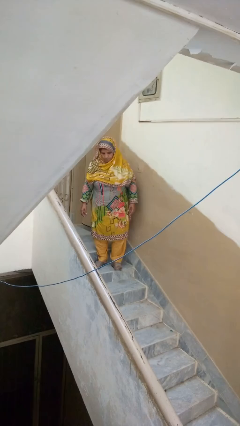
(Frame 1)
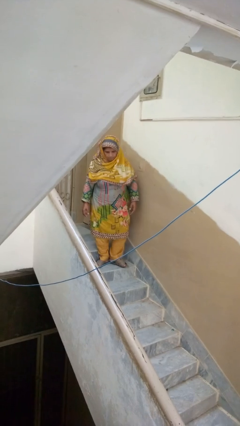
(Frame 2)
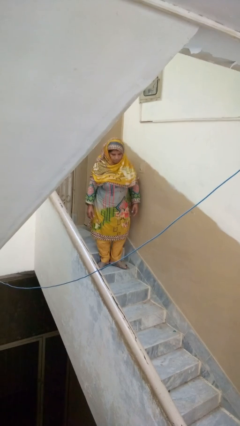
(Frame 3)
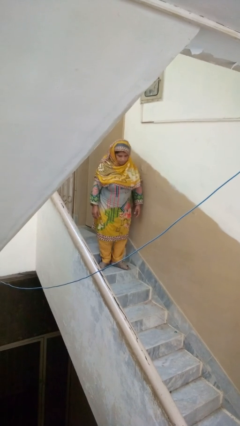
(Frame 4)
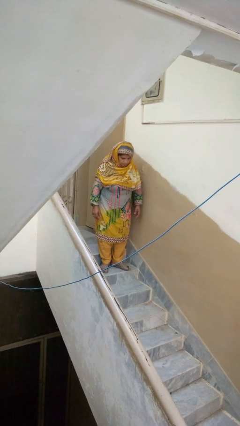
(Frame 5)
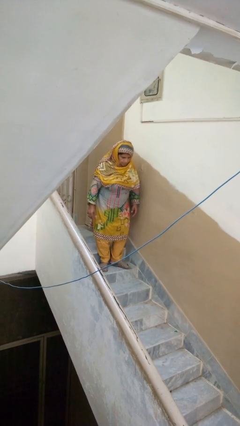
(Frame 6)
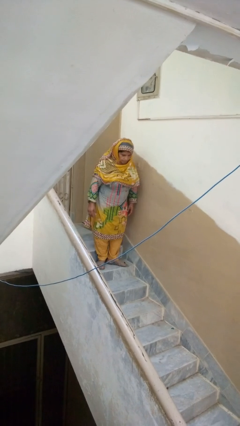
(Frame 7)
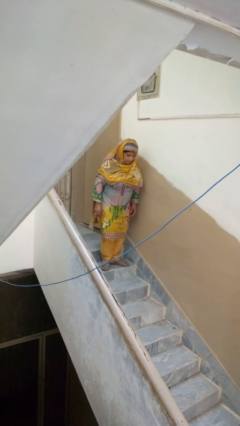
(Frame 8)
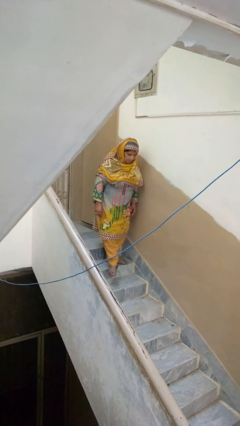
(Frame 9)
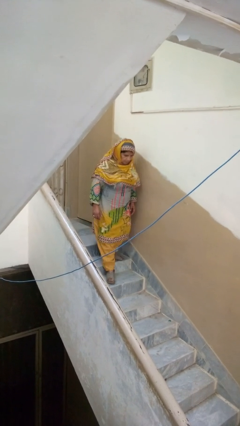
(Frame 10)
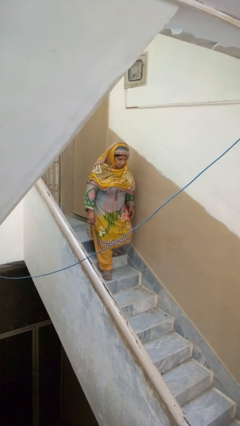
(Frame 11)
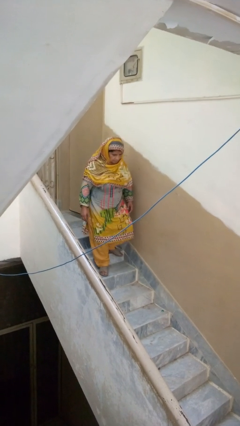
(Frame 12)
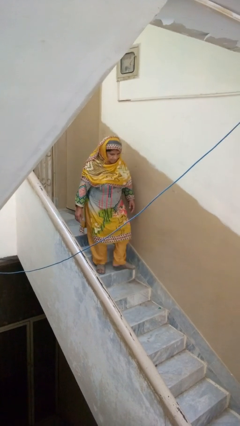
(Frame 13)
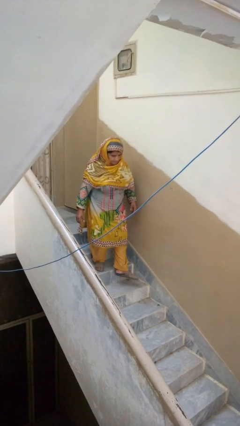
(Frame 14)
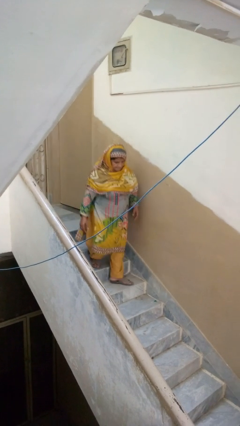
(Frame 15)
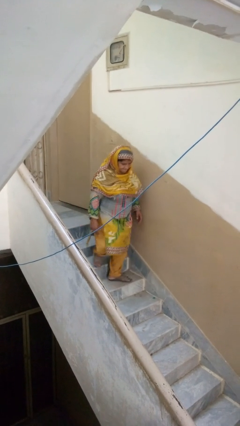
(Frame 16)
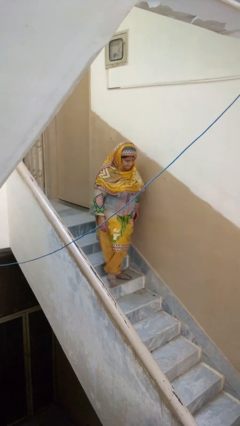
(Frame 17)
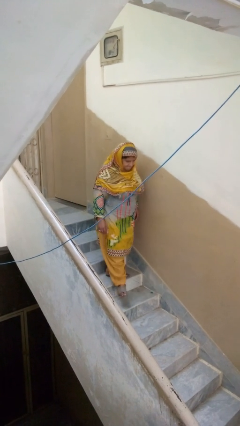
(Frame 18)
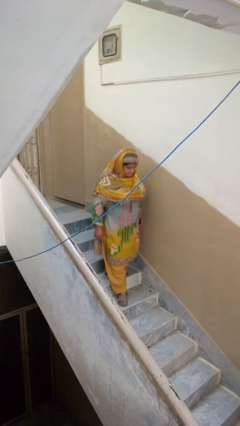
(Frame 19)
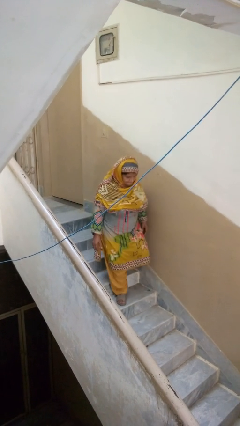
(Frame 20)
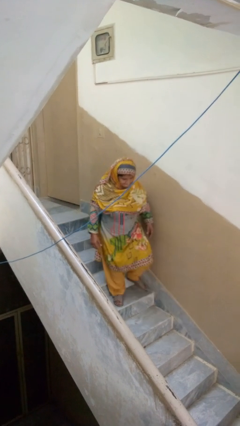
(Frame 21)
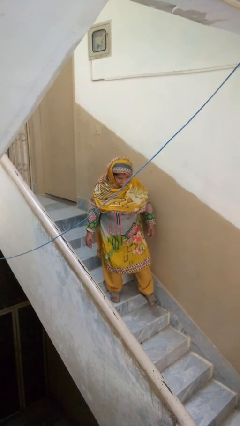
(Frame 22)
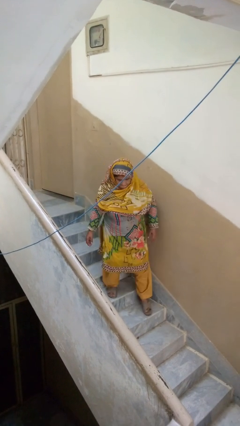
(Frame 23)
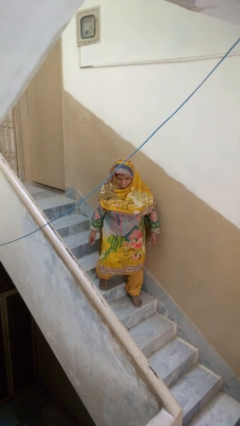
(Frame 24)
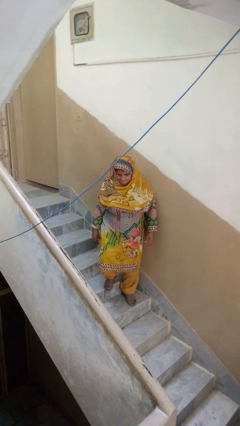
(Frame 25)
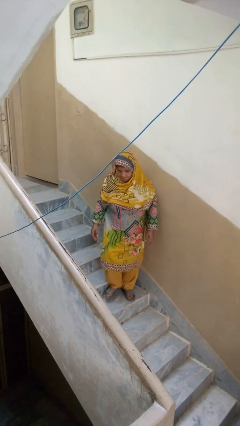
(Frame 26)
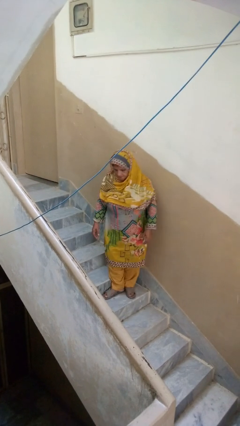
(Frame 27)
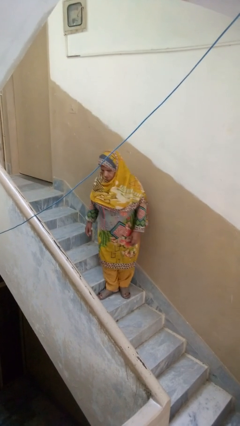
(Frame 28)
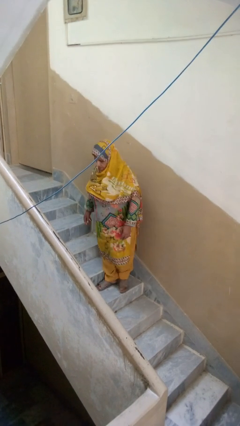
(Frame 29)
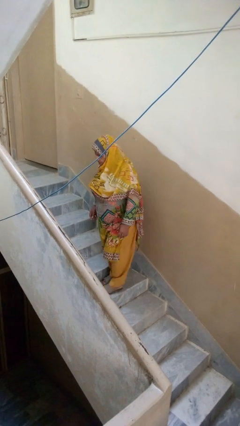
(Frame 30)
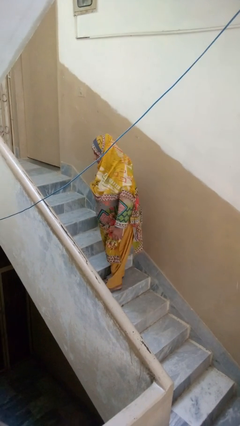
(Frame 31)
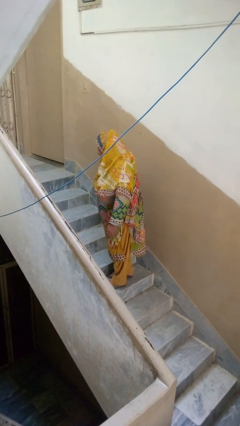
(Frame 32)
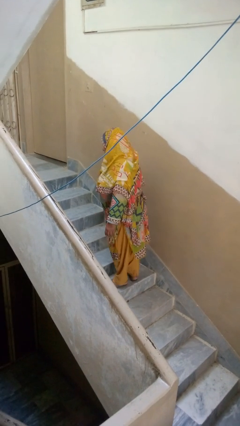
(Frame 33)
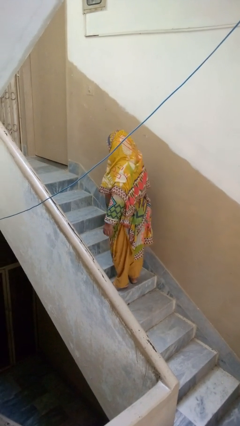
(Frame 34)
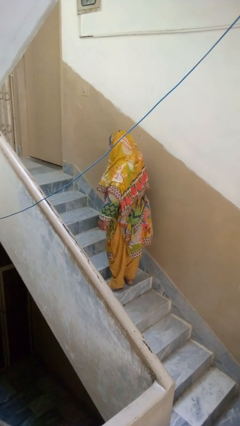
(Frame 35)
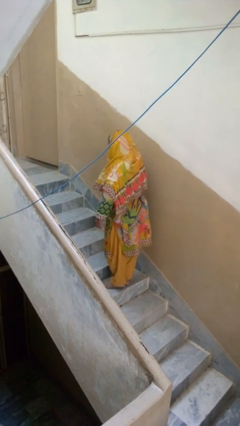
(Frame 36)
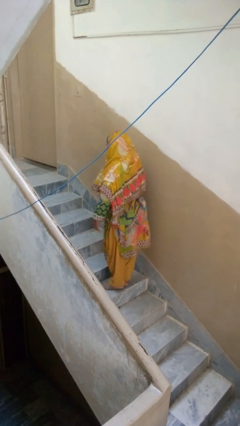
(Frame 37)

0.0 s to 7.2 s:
person climbs down stairs

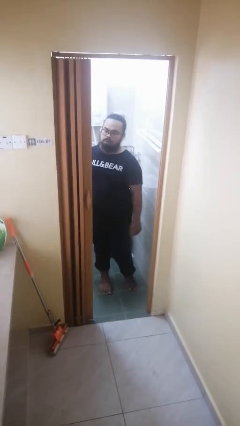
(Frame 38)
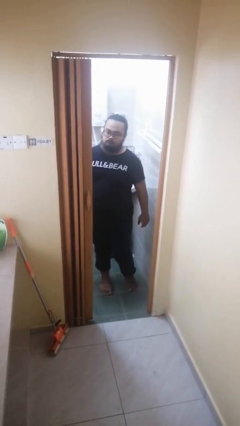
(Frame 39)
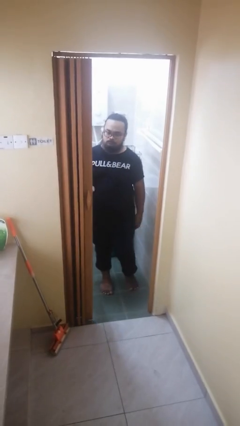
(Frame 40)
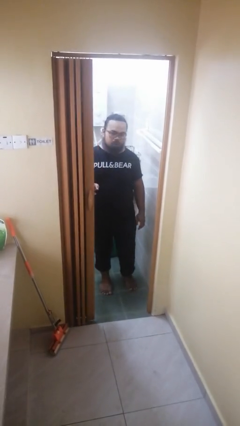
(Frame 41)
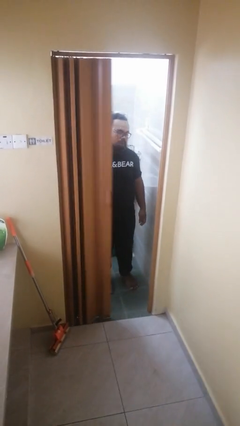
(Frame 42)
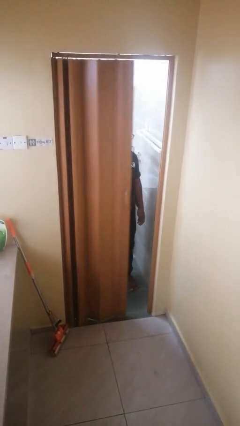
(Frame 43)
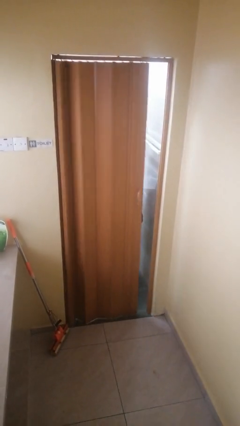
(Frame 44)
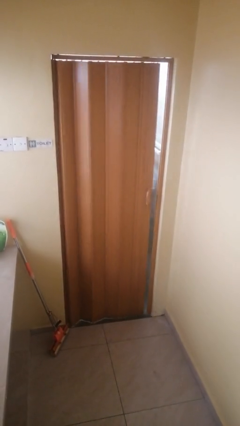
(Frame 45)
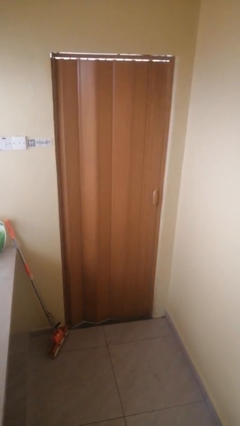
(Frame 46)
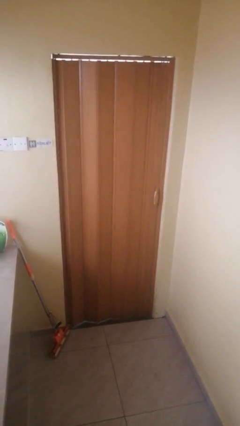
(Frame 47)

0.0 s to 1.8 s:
person closes sliding door

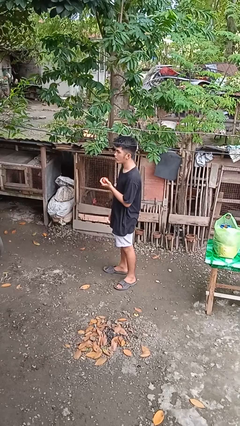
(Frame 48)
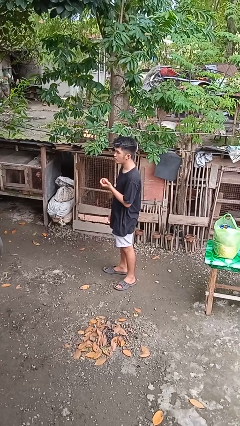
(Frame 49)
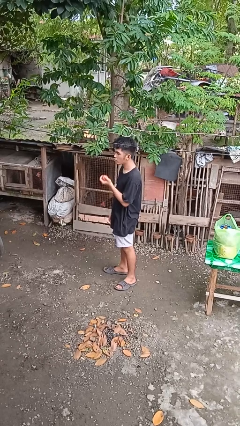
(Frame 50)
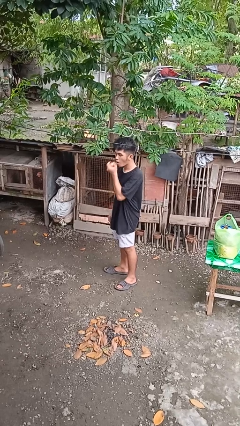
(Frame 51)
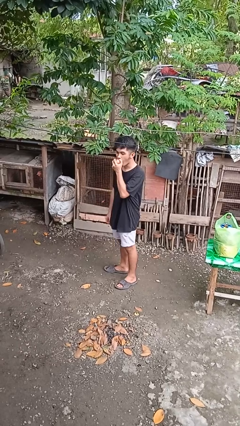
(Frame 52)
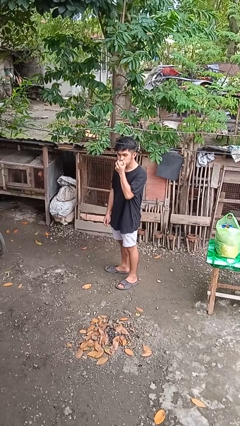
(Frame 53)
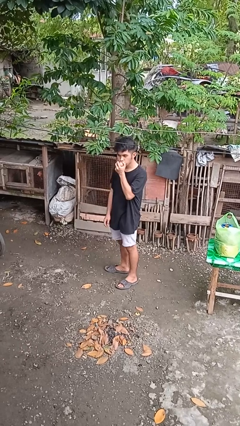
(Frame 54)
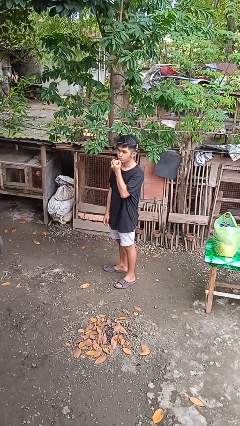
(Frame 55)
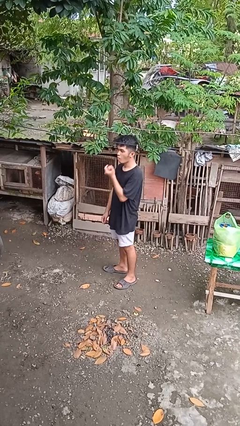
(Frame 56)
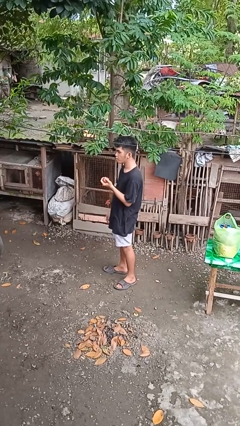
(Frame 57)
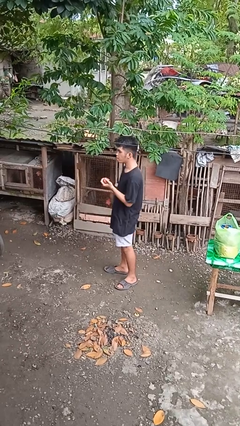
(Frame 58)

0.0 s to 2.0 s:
person eats apple

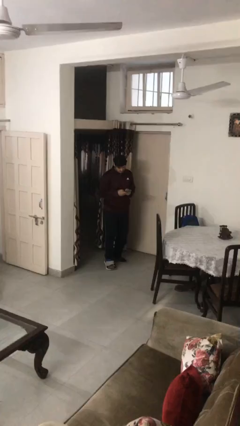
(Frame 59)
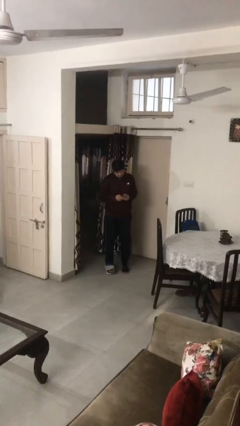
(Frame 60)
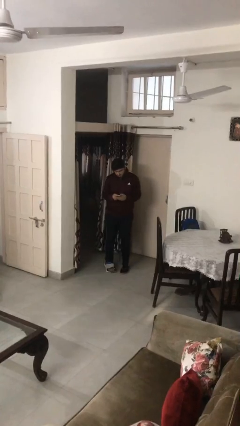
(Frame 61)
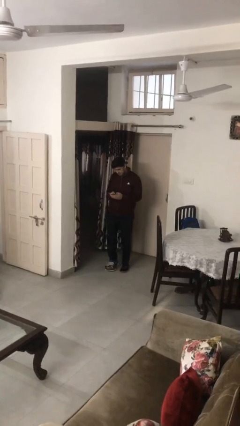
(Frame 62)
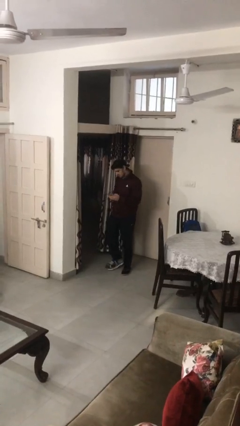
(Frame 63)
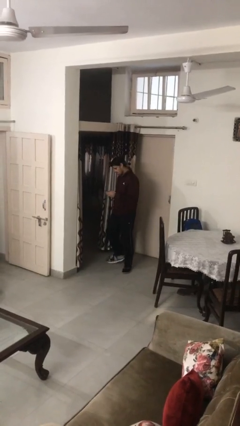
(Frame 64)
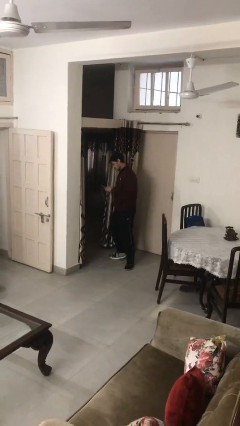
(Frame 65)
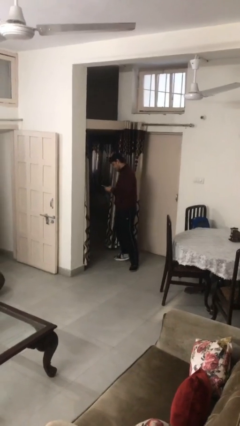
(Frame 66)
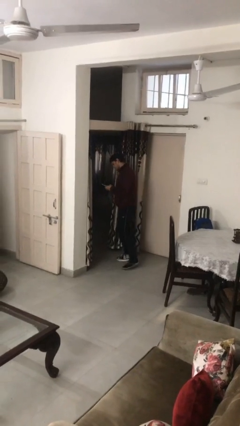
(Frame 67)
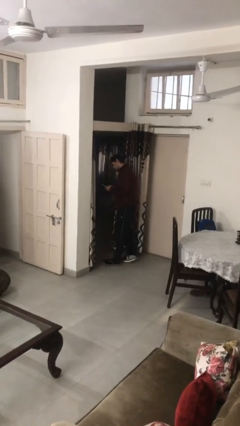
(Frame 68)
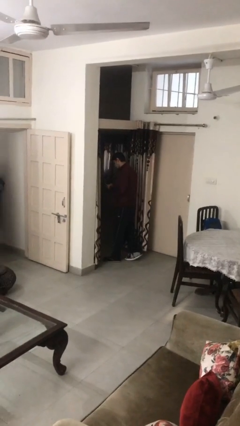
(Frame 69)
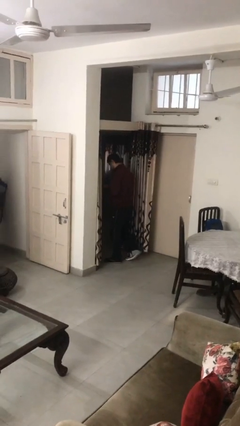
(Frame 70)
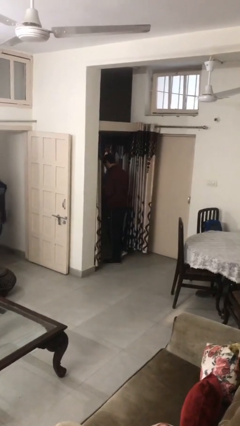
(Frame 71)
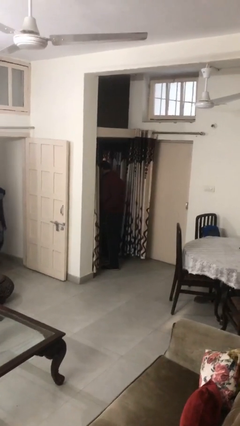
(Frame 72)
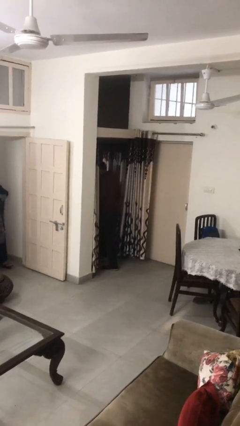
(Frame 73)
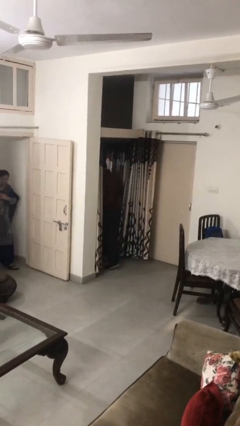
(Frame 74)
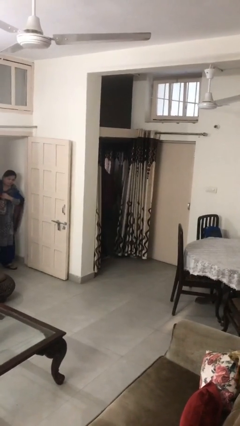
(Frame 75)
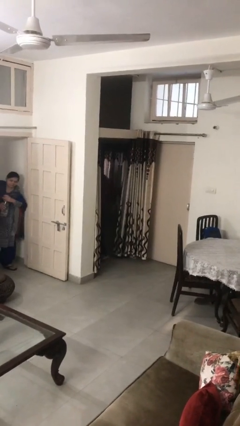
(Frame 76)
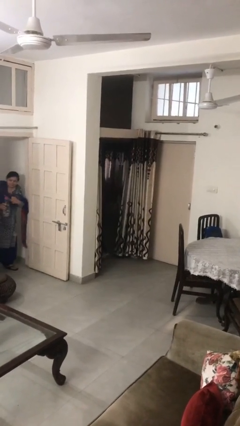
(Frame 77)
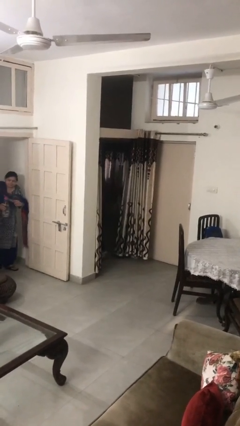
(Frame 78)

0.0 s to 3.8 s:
person exits scene through structure

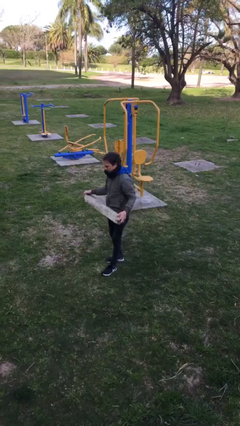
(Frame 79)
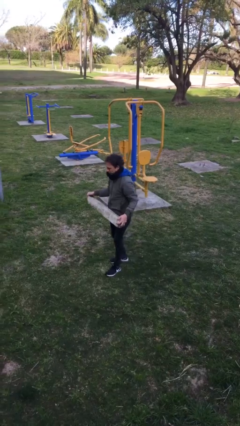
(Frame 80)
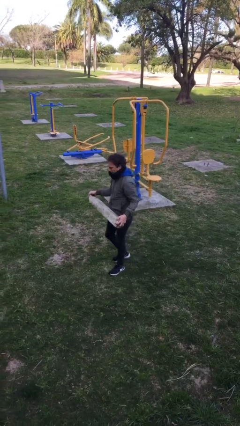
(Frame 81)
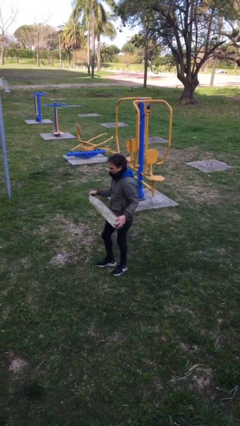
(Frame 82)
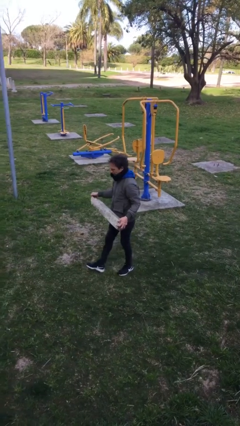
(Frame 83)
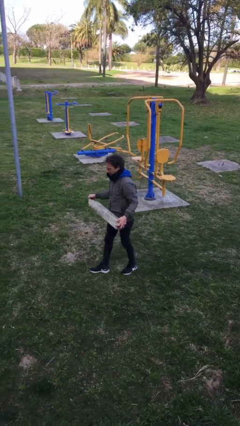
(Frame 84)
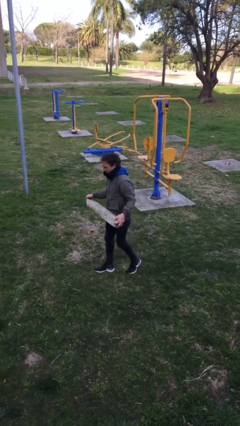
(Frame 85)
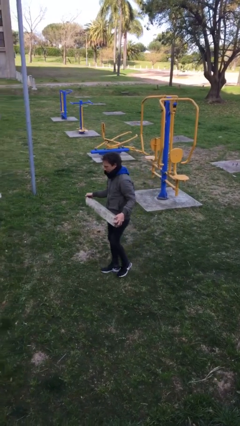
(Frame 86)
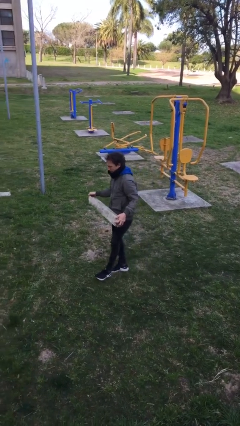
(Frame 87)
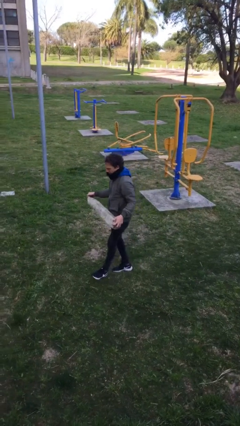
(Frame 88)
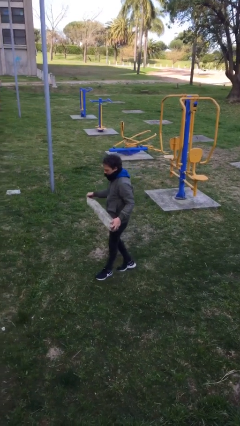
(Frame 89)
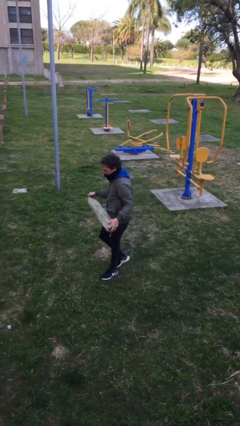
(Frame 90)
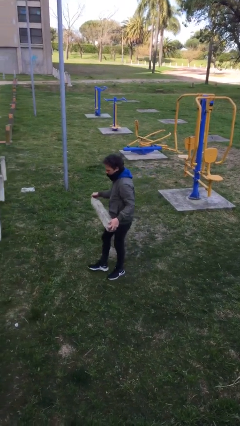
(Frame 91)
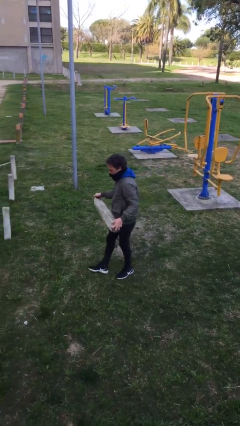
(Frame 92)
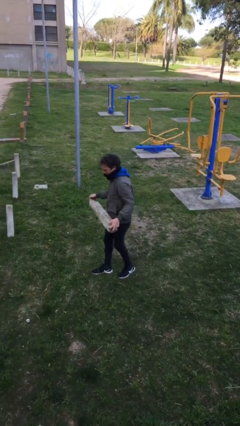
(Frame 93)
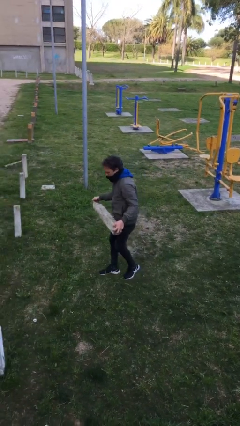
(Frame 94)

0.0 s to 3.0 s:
person carries heavy object

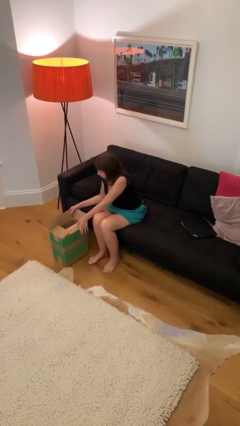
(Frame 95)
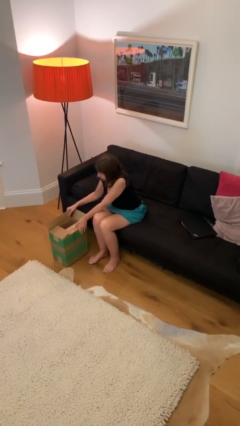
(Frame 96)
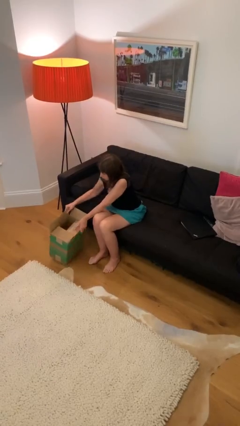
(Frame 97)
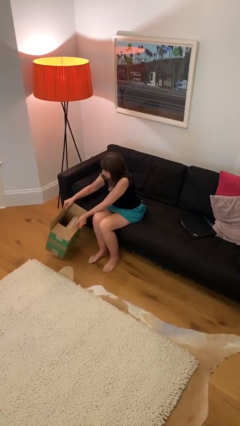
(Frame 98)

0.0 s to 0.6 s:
person picks up object from floor
